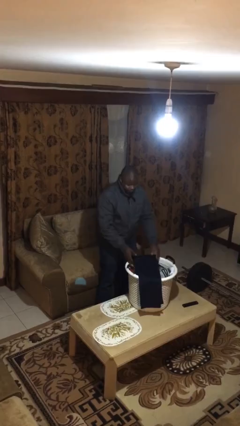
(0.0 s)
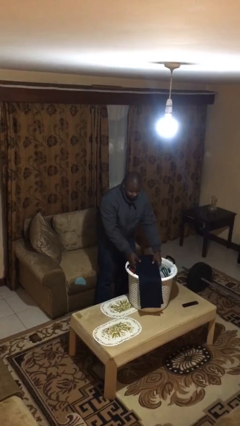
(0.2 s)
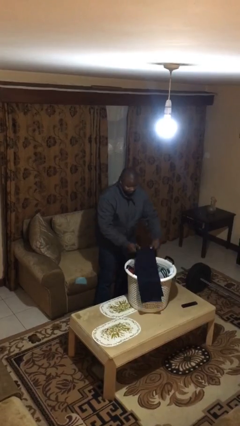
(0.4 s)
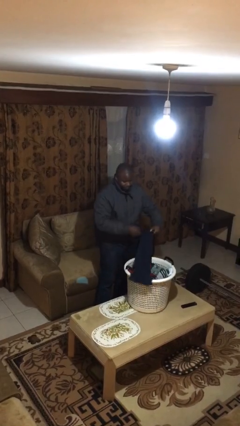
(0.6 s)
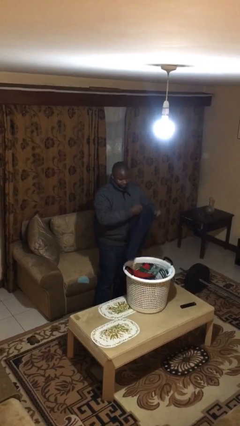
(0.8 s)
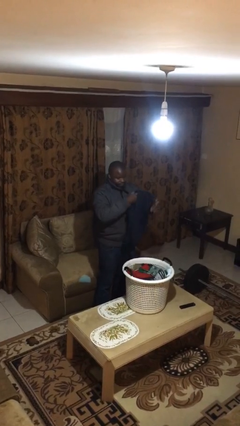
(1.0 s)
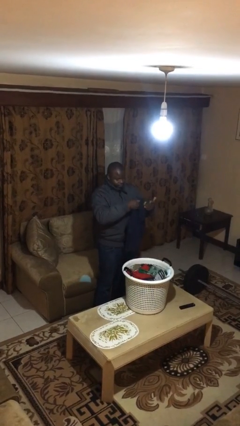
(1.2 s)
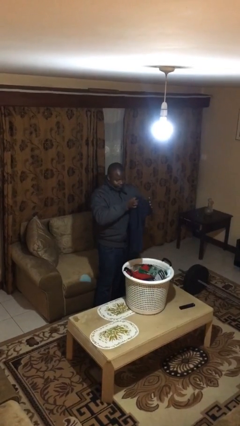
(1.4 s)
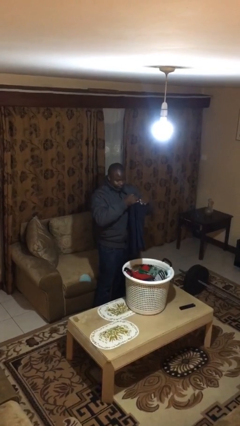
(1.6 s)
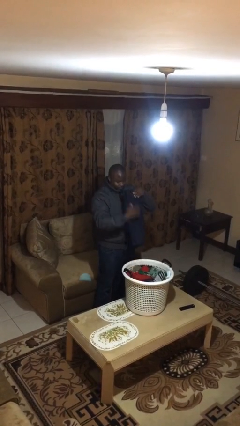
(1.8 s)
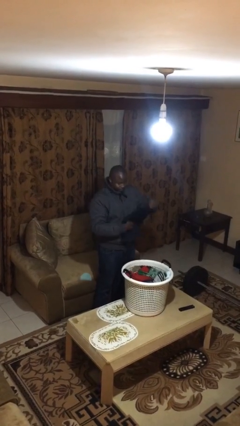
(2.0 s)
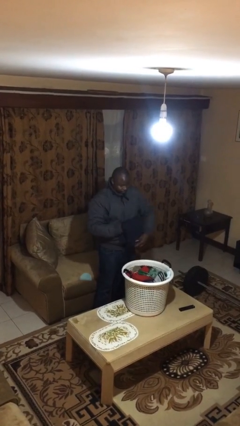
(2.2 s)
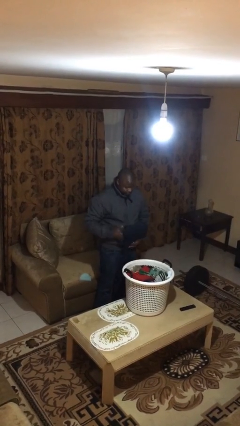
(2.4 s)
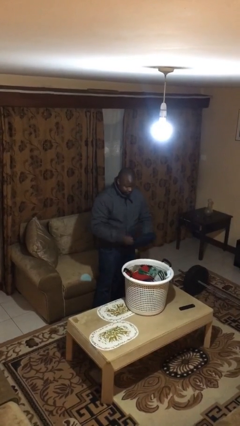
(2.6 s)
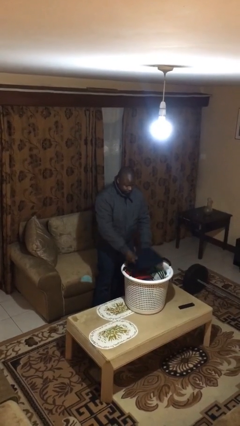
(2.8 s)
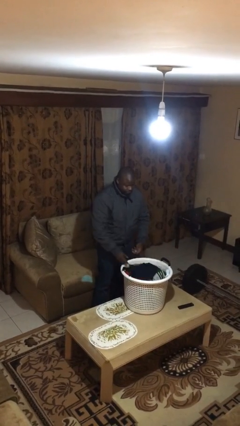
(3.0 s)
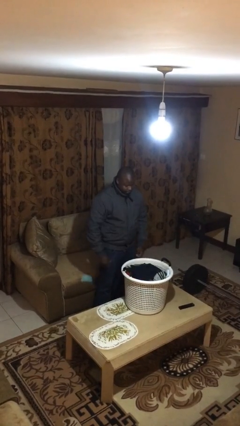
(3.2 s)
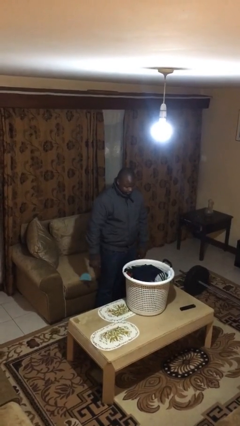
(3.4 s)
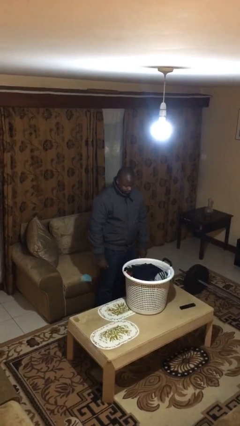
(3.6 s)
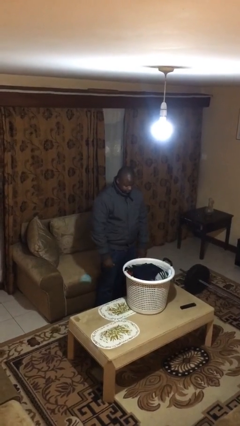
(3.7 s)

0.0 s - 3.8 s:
person folds pants

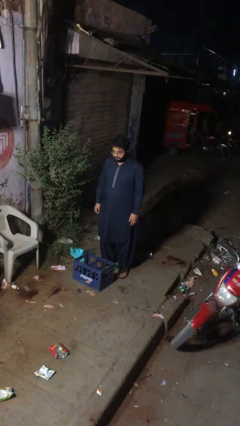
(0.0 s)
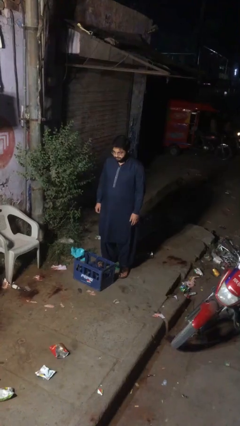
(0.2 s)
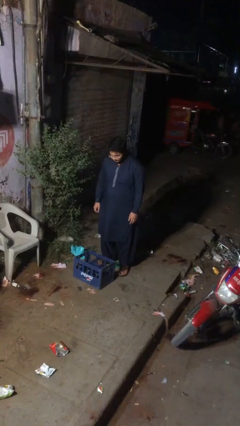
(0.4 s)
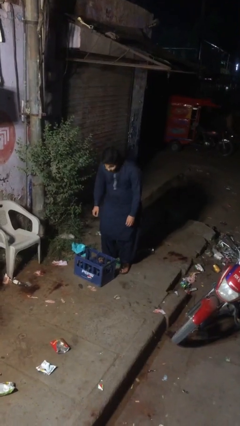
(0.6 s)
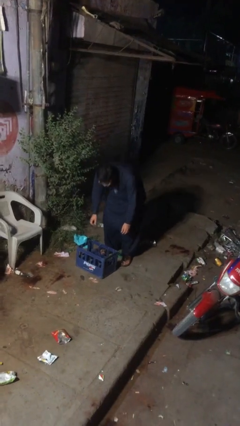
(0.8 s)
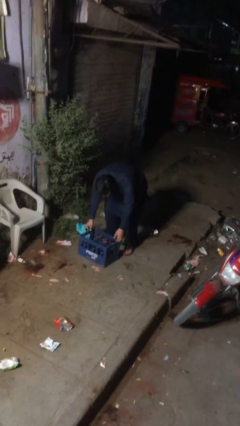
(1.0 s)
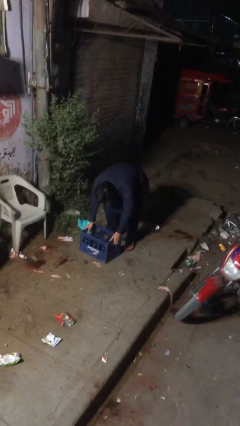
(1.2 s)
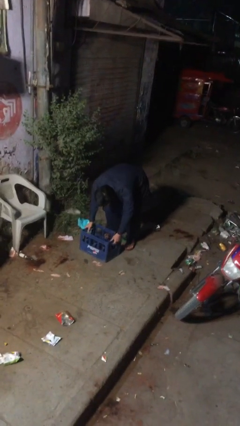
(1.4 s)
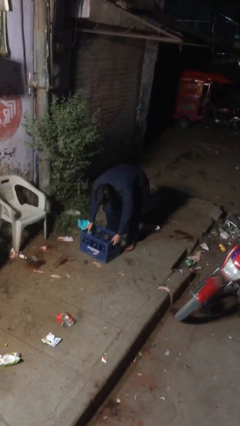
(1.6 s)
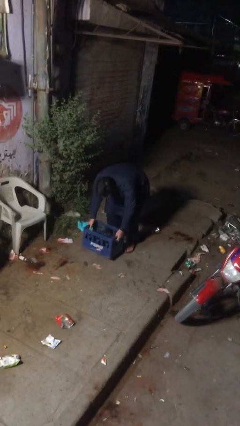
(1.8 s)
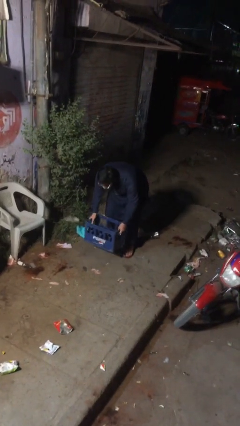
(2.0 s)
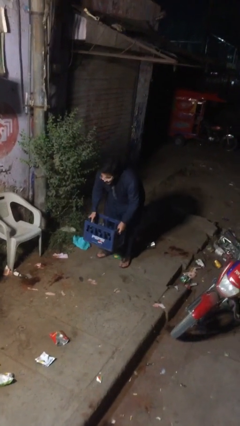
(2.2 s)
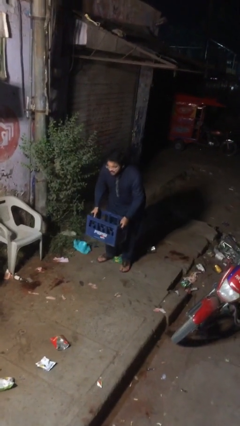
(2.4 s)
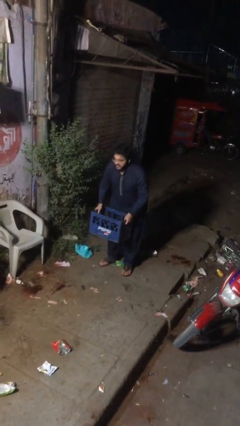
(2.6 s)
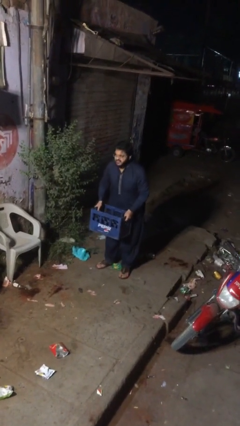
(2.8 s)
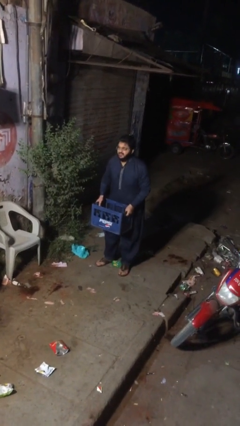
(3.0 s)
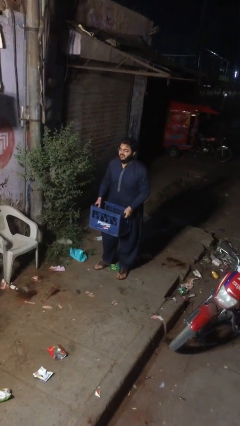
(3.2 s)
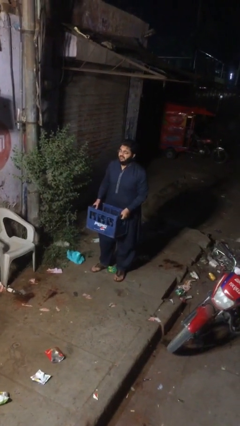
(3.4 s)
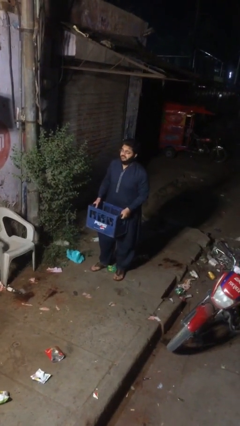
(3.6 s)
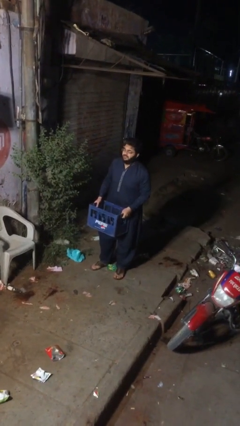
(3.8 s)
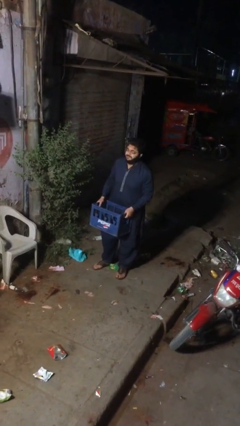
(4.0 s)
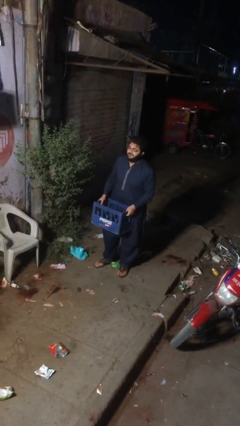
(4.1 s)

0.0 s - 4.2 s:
person picks up object from floor

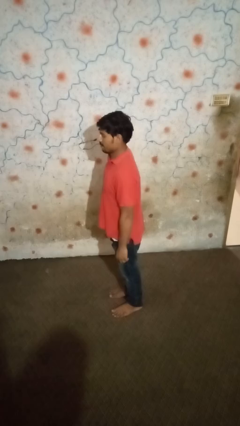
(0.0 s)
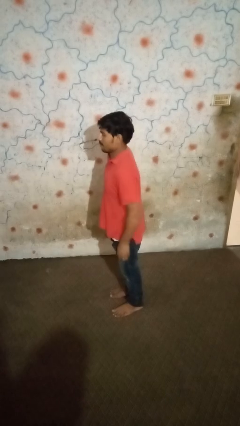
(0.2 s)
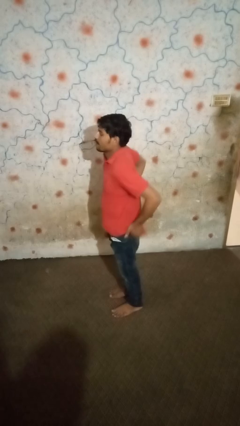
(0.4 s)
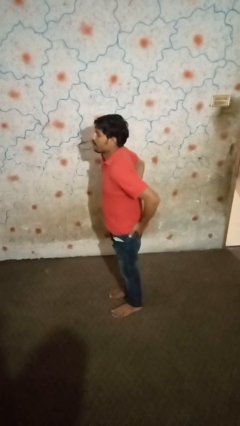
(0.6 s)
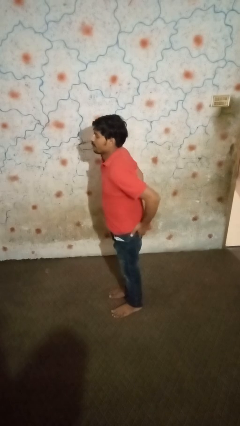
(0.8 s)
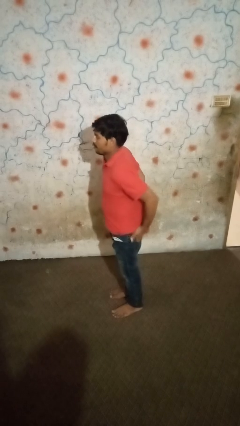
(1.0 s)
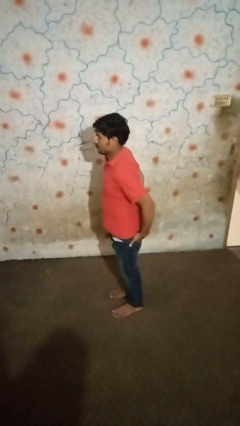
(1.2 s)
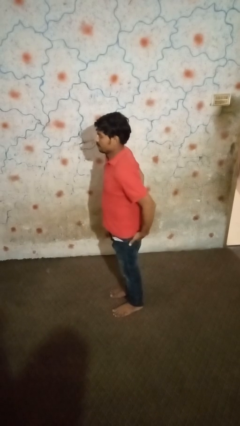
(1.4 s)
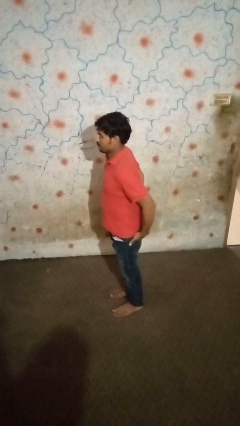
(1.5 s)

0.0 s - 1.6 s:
person puts hands in back pockets

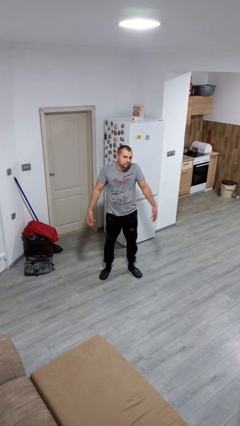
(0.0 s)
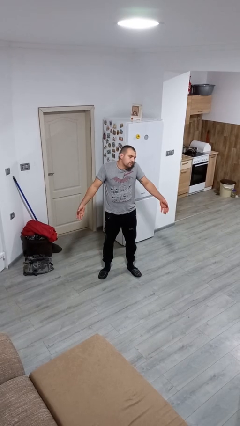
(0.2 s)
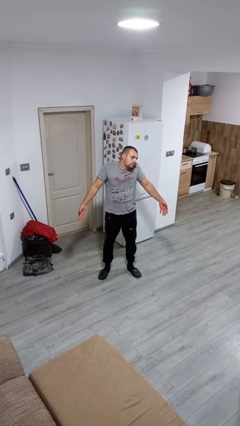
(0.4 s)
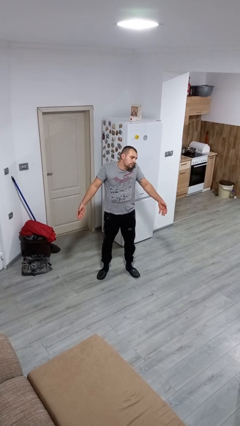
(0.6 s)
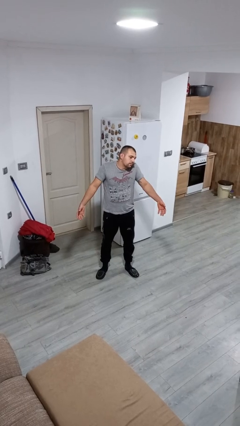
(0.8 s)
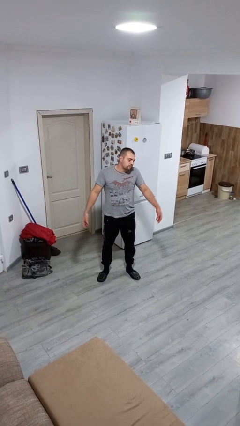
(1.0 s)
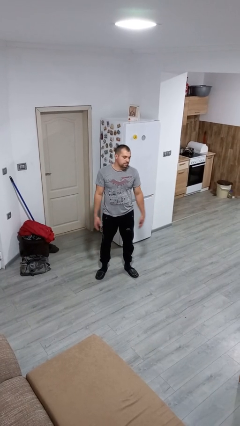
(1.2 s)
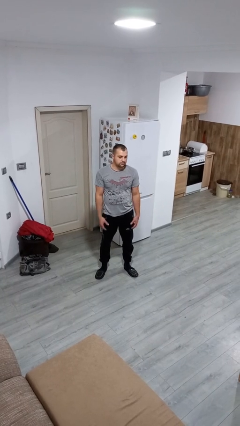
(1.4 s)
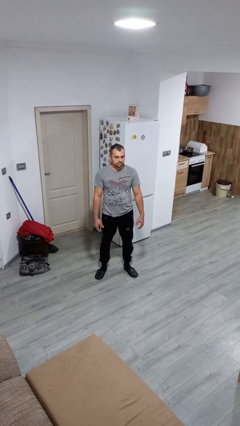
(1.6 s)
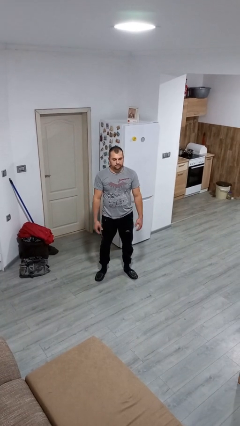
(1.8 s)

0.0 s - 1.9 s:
person shrugs

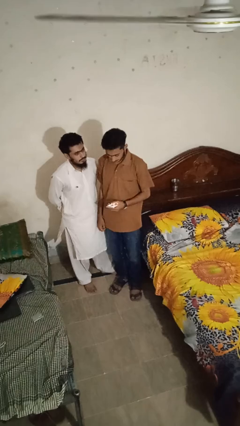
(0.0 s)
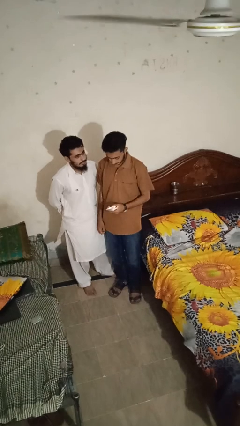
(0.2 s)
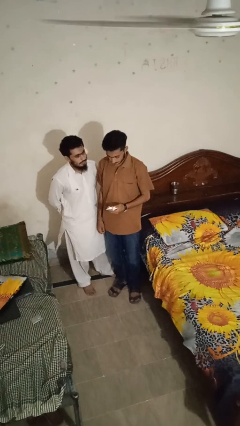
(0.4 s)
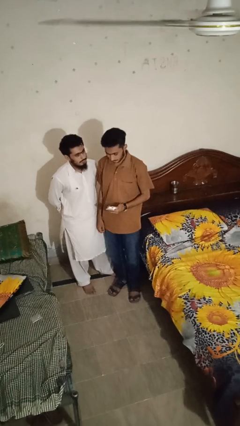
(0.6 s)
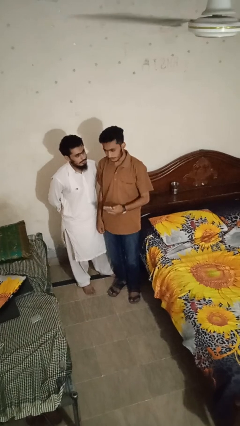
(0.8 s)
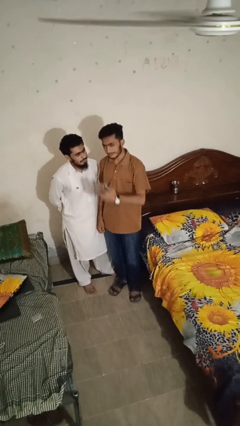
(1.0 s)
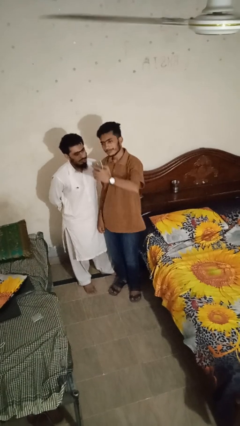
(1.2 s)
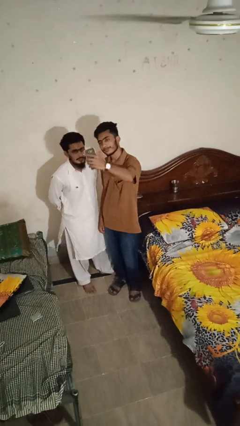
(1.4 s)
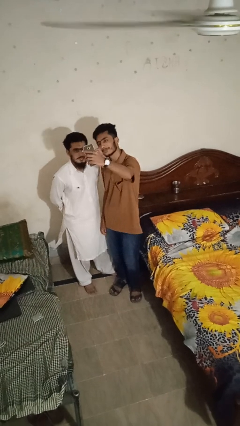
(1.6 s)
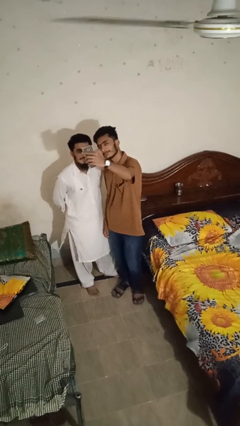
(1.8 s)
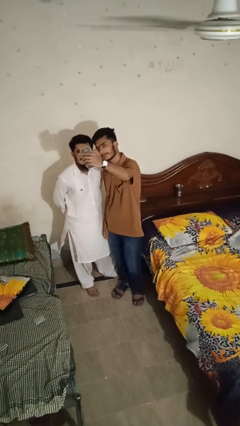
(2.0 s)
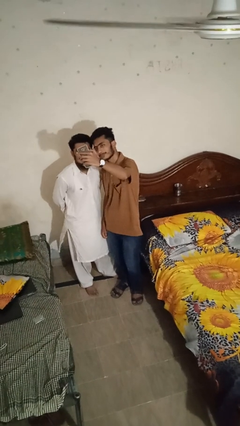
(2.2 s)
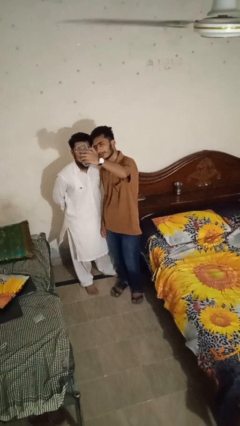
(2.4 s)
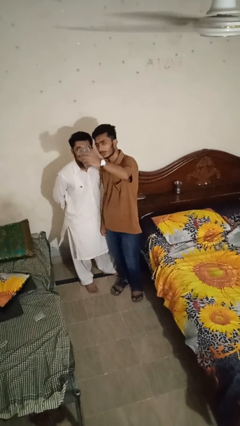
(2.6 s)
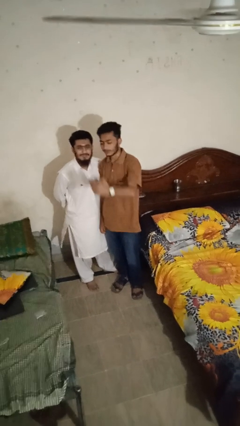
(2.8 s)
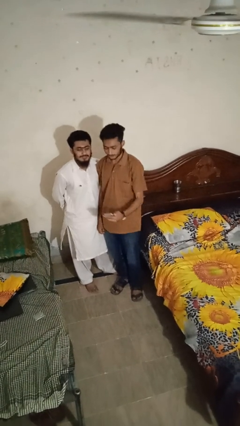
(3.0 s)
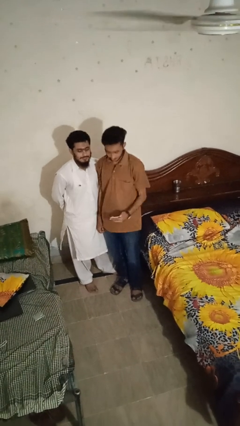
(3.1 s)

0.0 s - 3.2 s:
person takes selfie with person

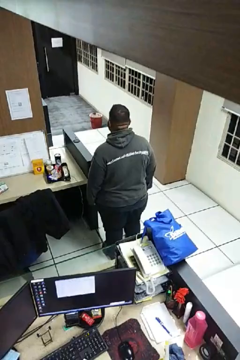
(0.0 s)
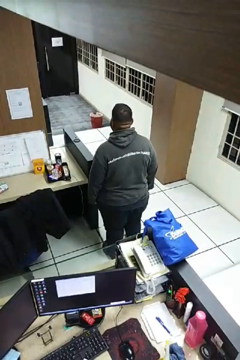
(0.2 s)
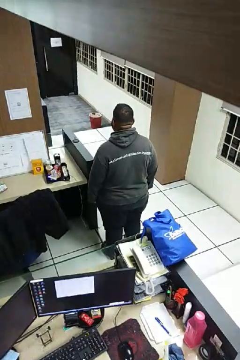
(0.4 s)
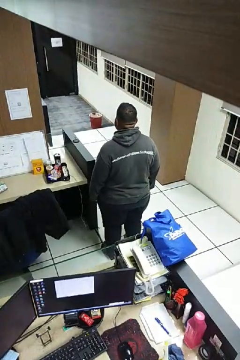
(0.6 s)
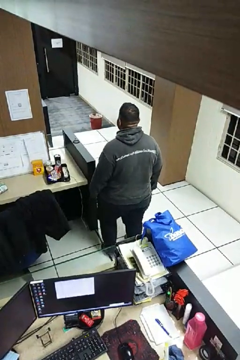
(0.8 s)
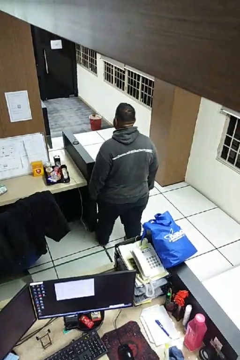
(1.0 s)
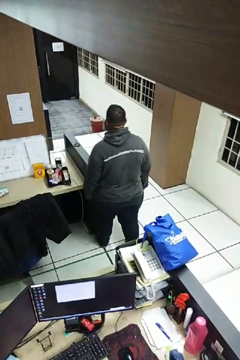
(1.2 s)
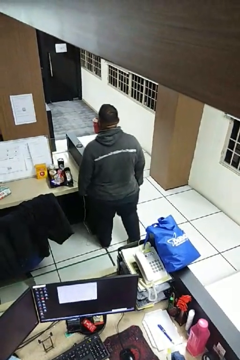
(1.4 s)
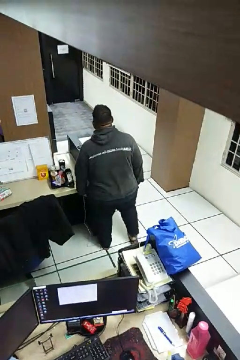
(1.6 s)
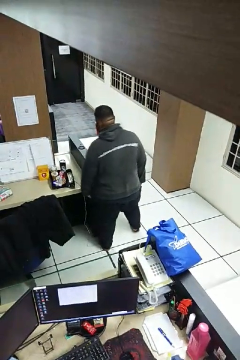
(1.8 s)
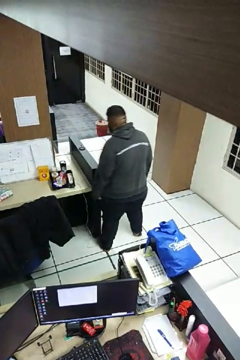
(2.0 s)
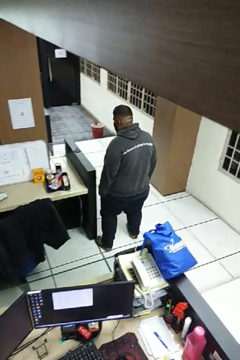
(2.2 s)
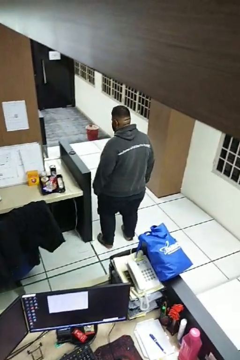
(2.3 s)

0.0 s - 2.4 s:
person bumps into table

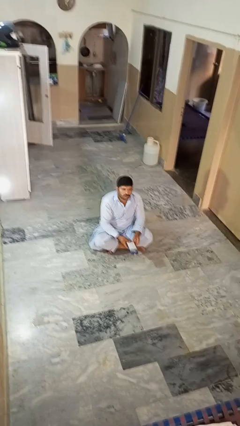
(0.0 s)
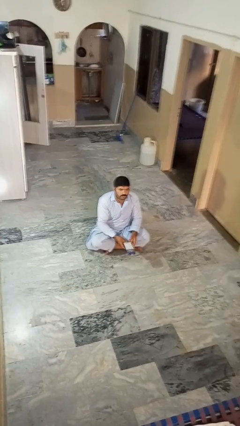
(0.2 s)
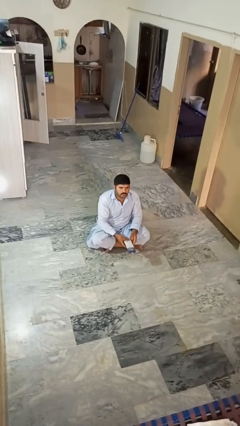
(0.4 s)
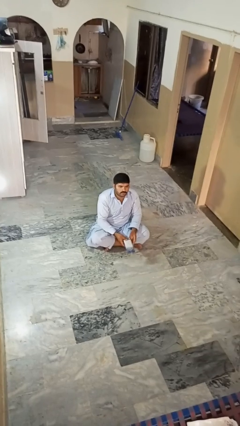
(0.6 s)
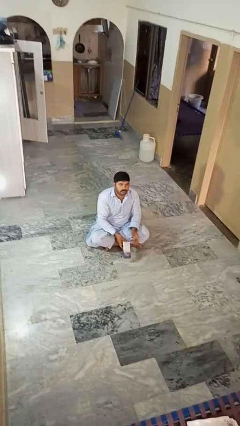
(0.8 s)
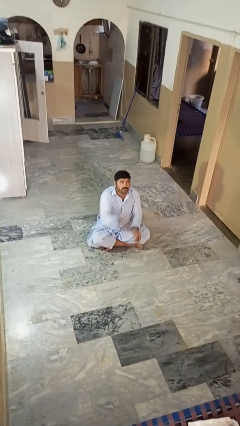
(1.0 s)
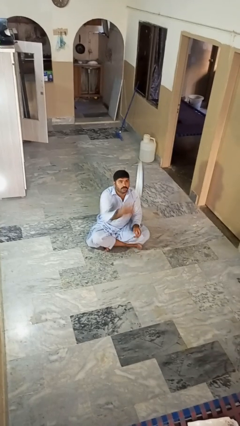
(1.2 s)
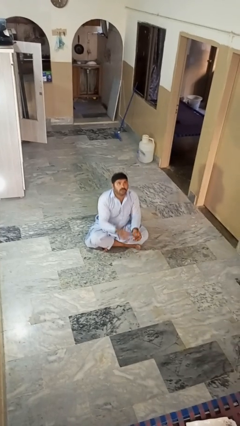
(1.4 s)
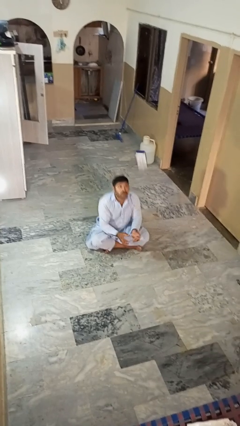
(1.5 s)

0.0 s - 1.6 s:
person drops object
